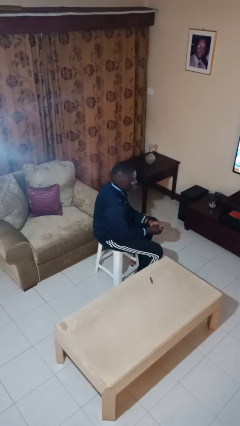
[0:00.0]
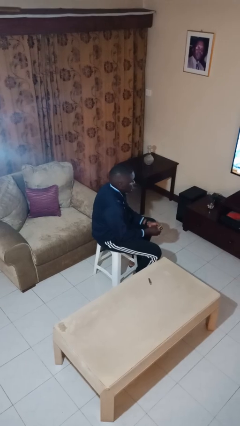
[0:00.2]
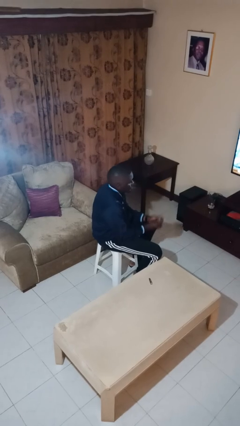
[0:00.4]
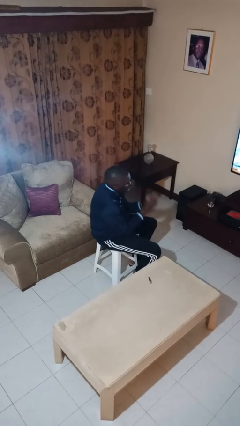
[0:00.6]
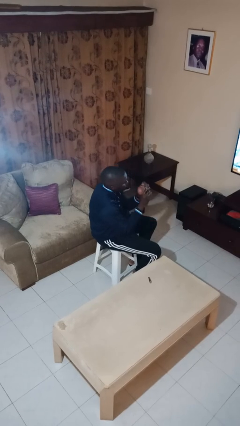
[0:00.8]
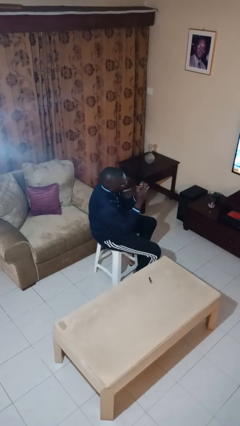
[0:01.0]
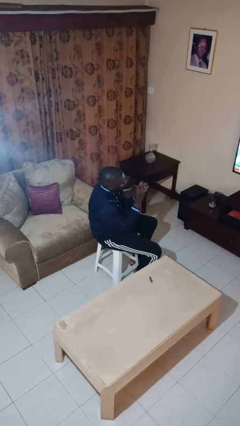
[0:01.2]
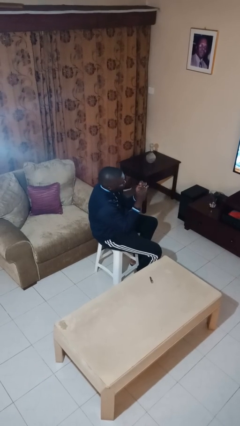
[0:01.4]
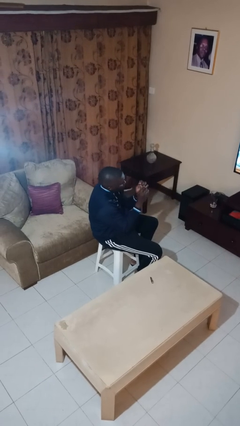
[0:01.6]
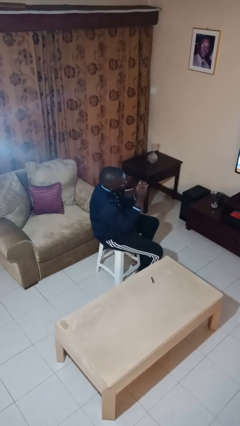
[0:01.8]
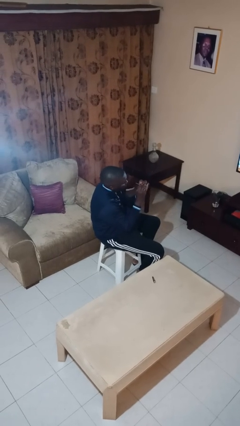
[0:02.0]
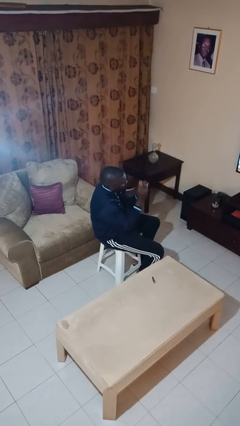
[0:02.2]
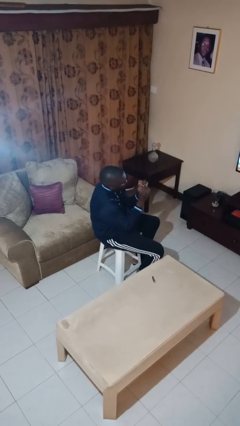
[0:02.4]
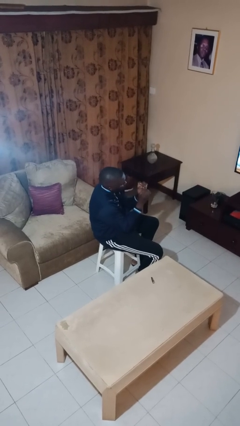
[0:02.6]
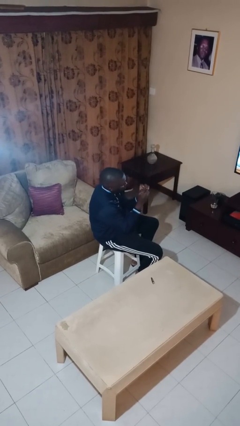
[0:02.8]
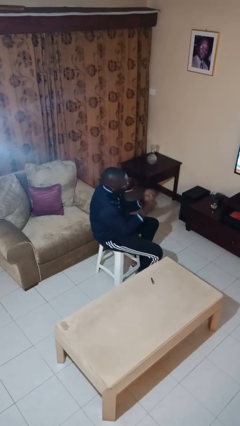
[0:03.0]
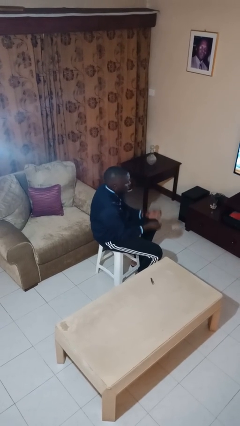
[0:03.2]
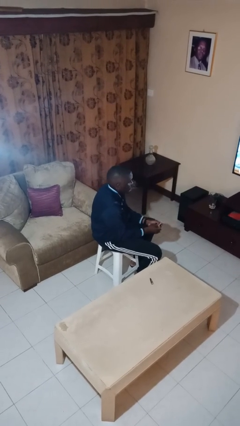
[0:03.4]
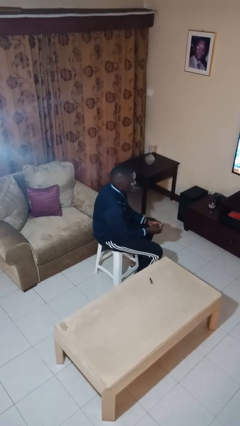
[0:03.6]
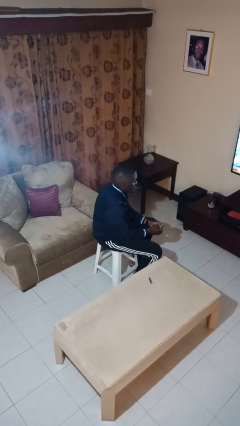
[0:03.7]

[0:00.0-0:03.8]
person files fingernails

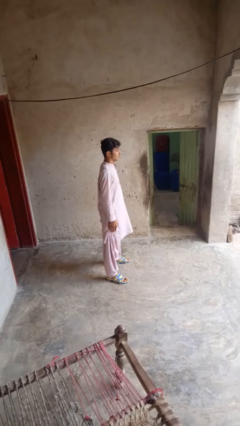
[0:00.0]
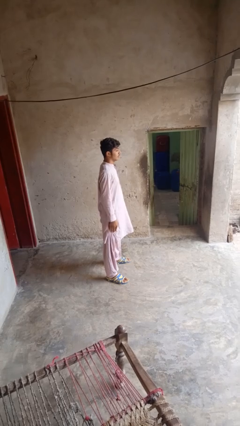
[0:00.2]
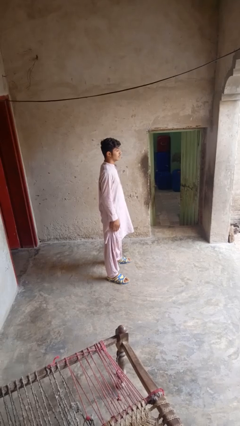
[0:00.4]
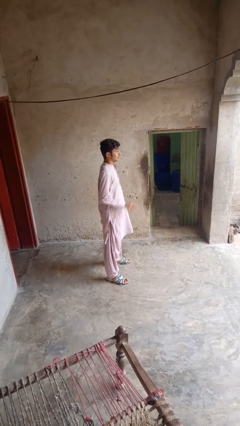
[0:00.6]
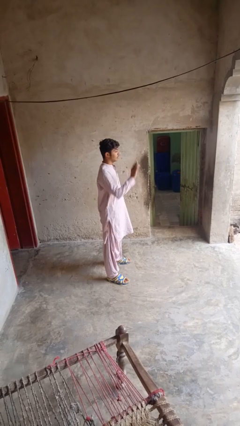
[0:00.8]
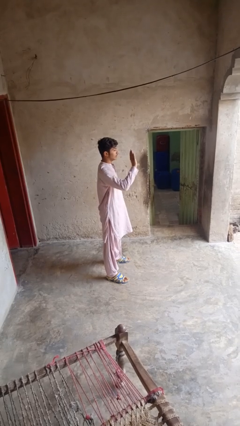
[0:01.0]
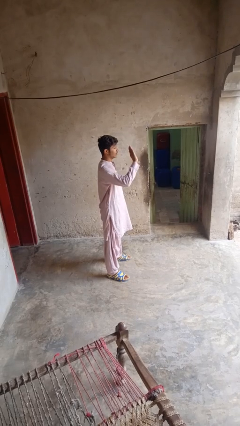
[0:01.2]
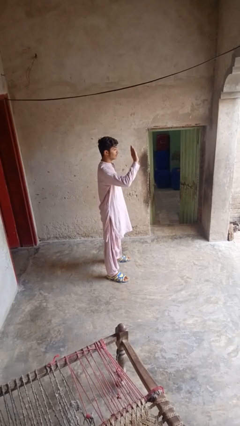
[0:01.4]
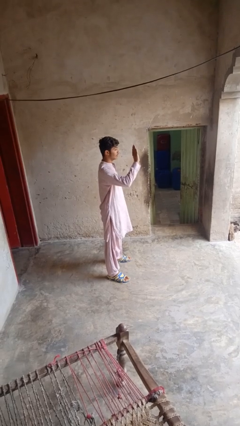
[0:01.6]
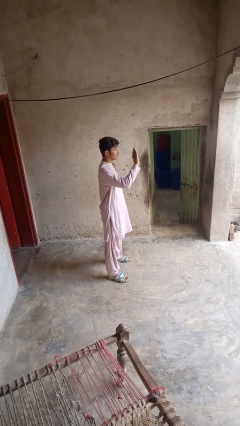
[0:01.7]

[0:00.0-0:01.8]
person waves at person

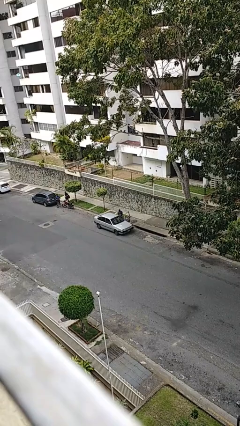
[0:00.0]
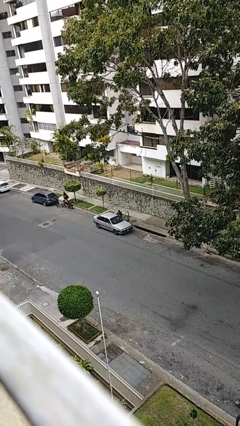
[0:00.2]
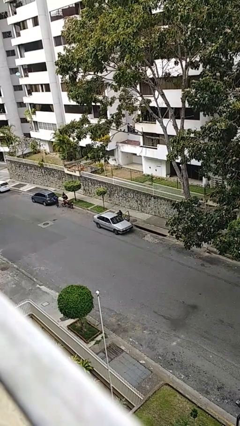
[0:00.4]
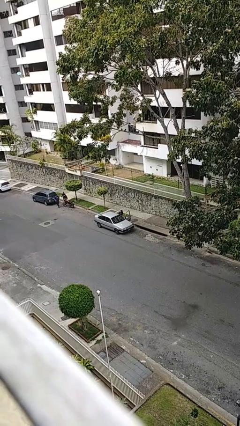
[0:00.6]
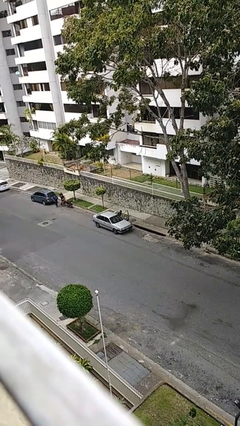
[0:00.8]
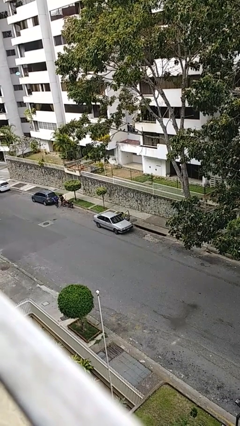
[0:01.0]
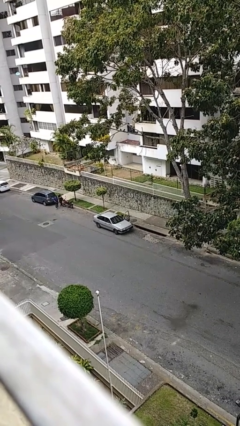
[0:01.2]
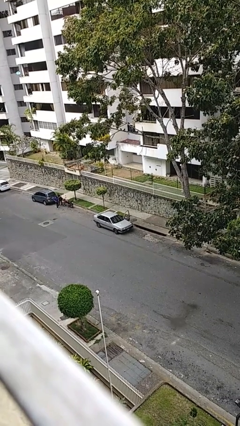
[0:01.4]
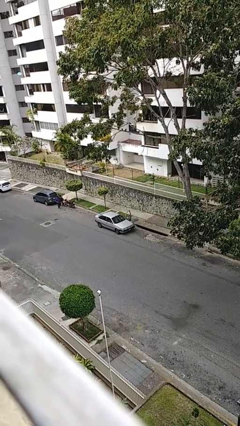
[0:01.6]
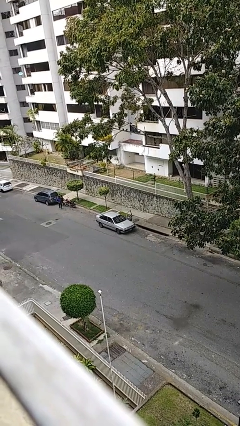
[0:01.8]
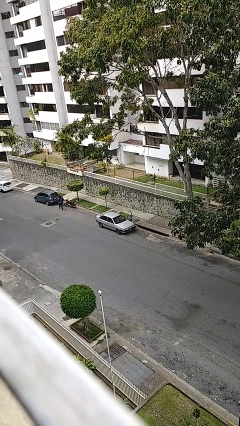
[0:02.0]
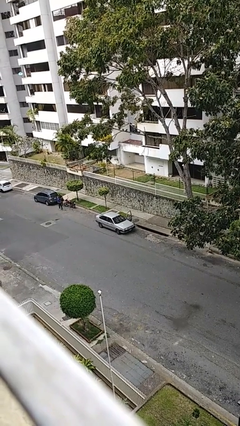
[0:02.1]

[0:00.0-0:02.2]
person enters car

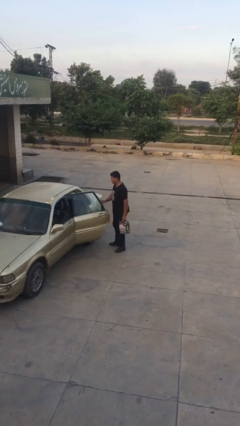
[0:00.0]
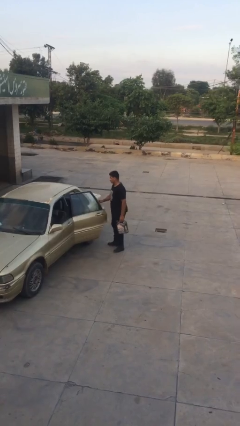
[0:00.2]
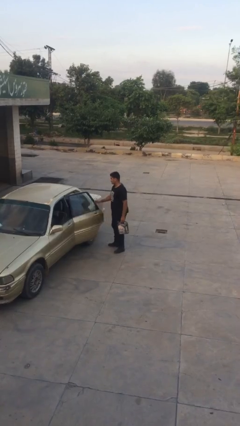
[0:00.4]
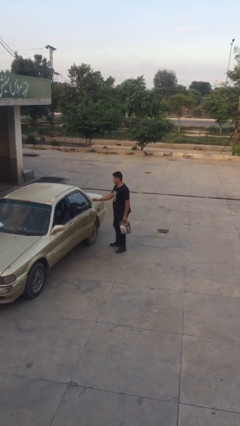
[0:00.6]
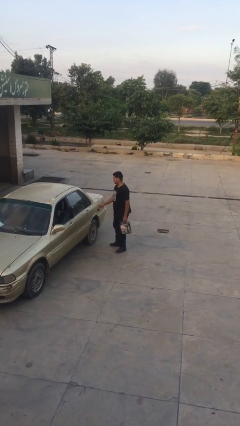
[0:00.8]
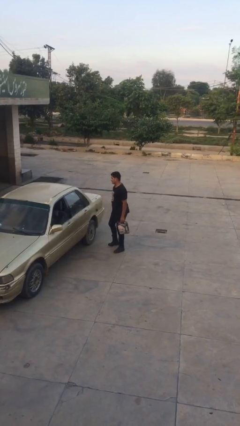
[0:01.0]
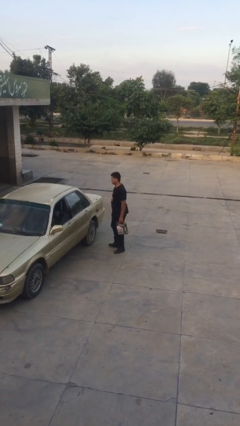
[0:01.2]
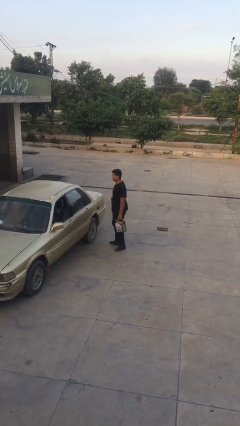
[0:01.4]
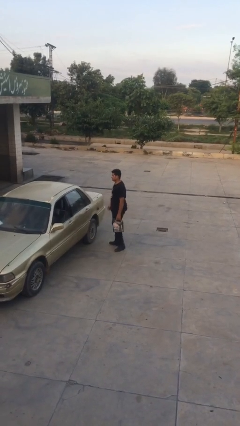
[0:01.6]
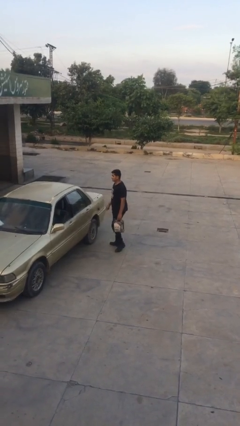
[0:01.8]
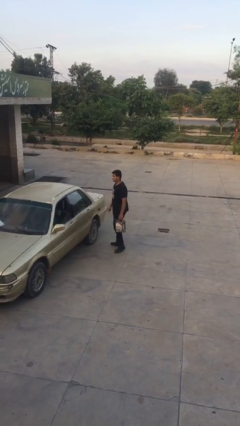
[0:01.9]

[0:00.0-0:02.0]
person closes car door

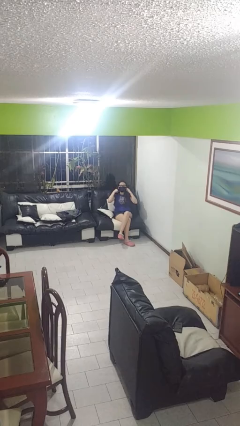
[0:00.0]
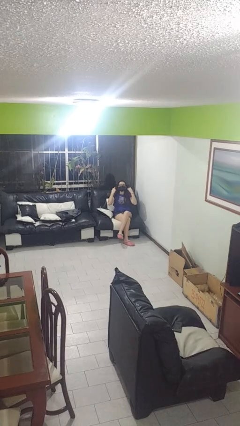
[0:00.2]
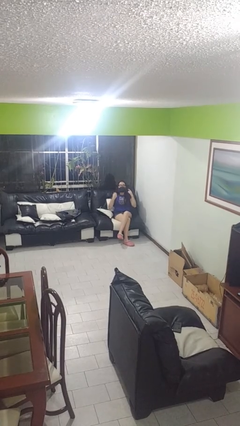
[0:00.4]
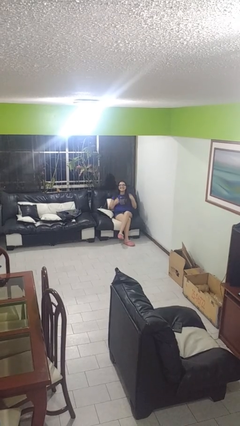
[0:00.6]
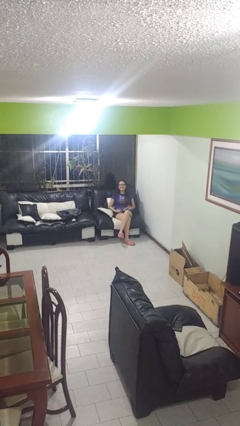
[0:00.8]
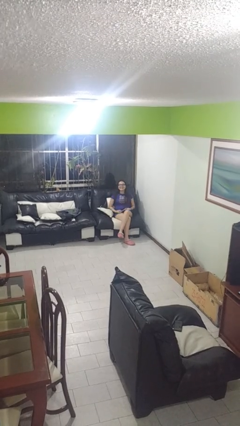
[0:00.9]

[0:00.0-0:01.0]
person takes off facemask

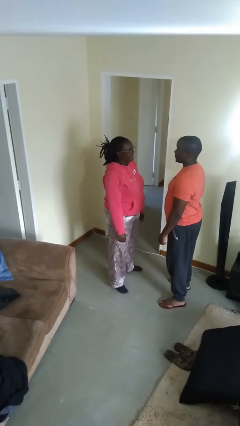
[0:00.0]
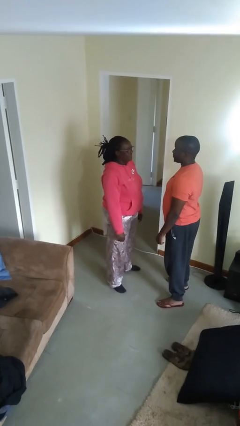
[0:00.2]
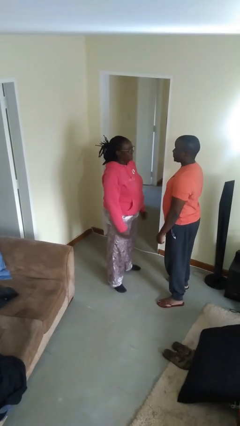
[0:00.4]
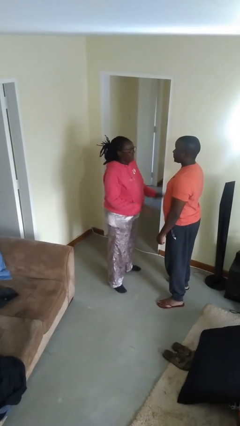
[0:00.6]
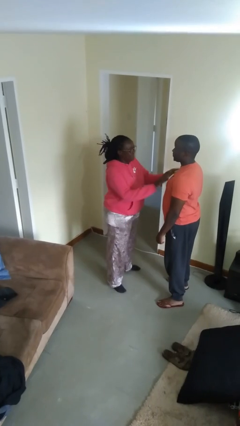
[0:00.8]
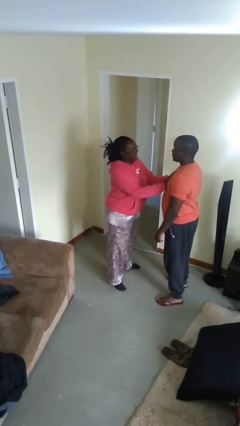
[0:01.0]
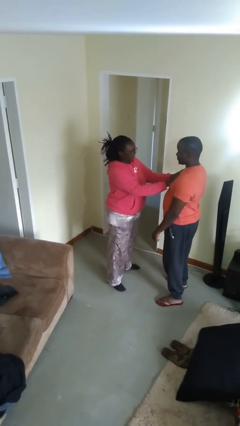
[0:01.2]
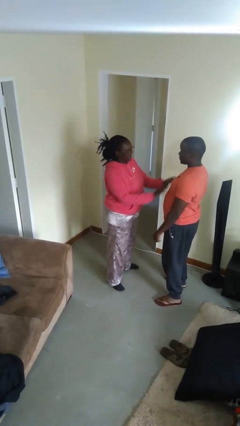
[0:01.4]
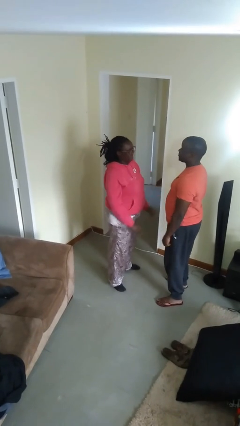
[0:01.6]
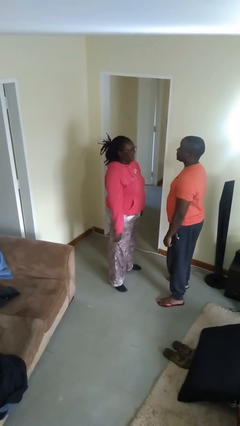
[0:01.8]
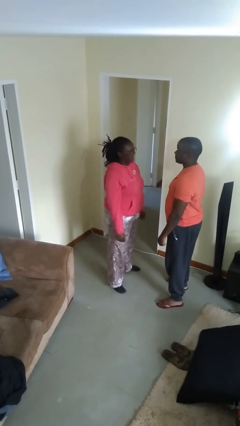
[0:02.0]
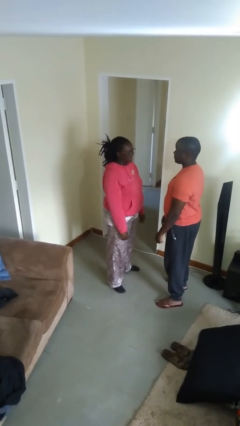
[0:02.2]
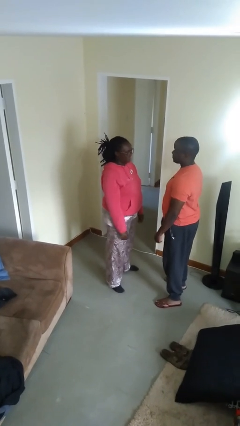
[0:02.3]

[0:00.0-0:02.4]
person shoves person

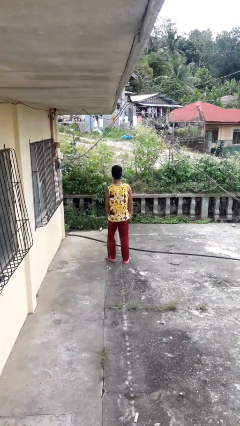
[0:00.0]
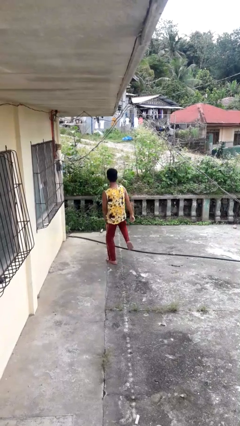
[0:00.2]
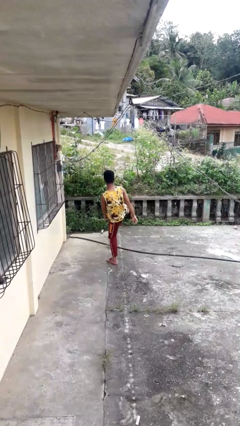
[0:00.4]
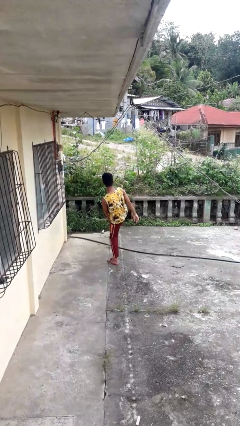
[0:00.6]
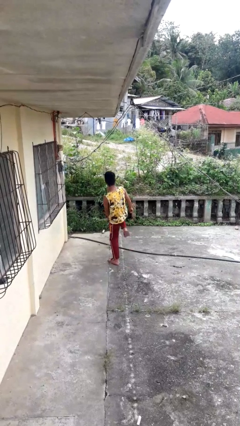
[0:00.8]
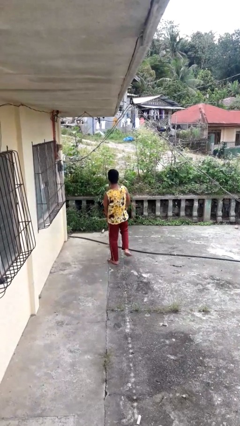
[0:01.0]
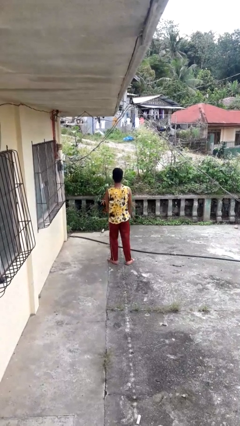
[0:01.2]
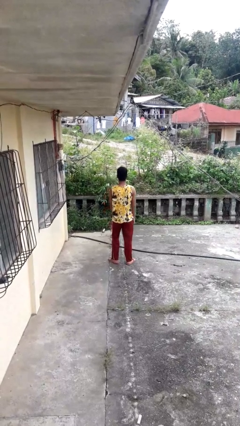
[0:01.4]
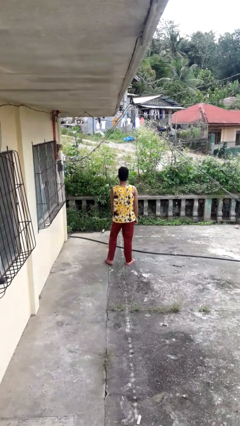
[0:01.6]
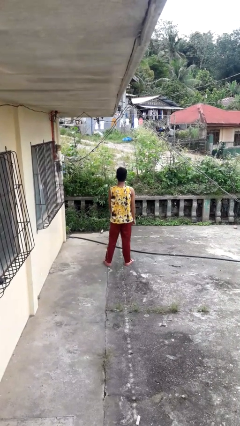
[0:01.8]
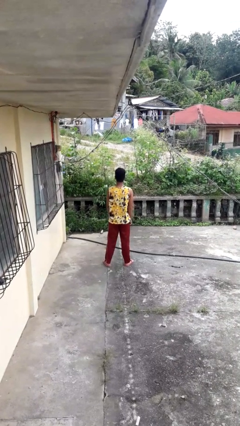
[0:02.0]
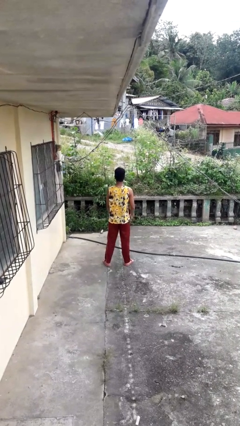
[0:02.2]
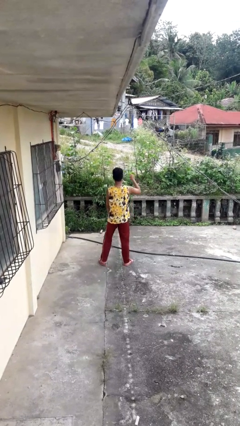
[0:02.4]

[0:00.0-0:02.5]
person karate kicks

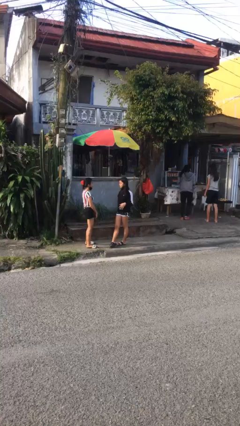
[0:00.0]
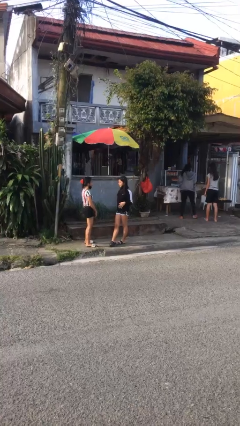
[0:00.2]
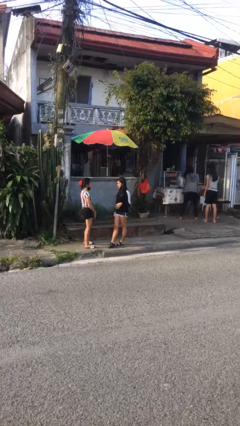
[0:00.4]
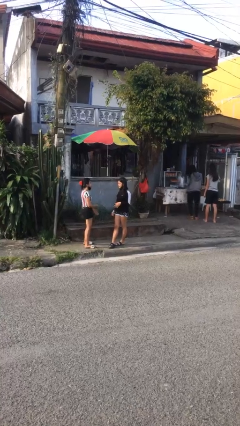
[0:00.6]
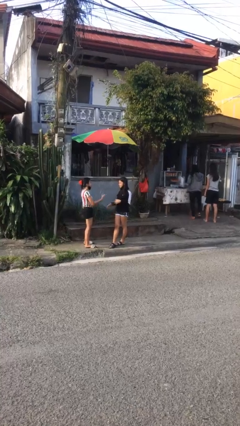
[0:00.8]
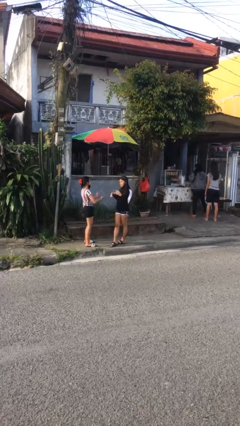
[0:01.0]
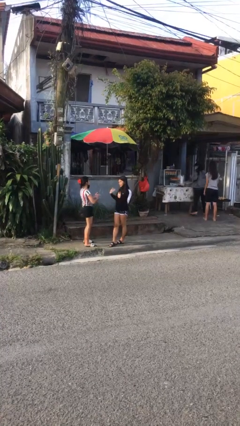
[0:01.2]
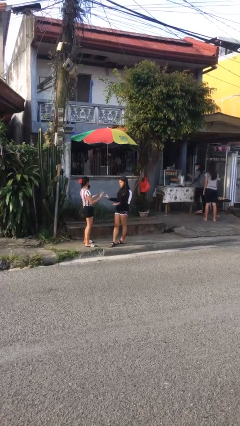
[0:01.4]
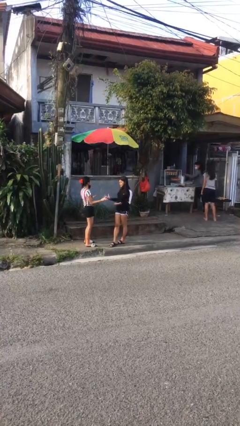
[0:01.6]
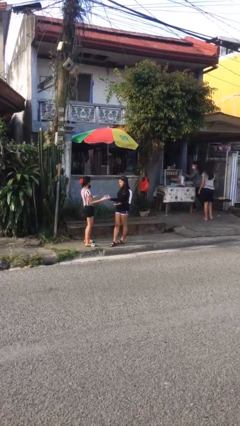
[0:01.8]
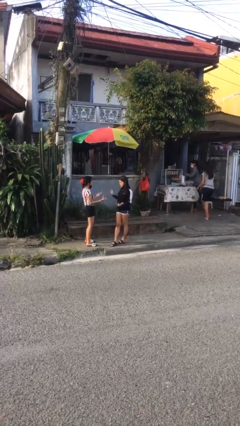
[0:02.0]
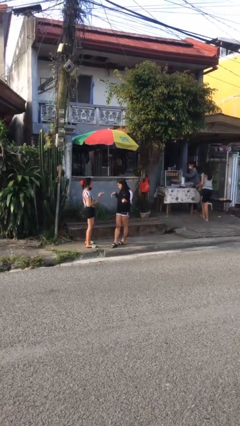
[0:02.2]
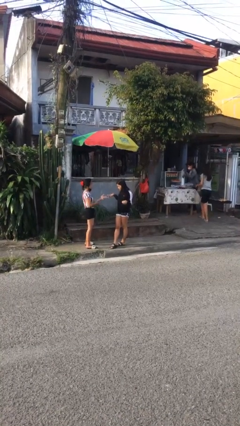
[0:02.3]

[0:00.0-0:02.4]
person talks to person
